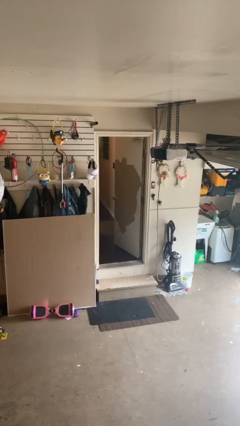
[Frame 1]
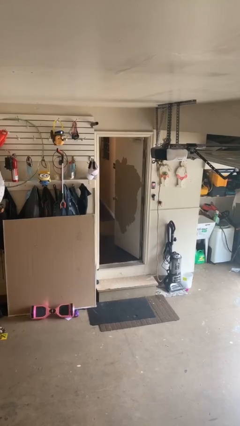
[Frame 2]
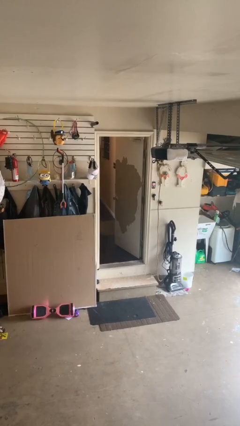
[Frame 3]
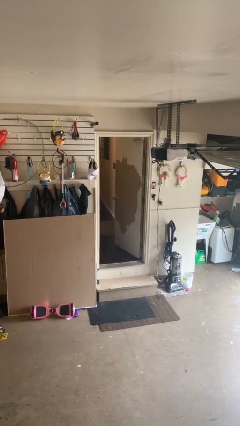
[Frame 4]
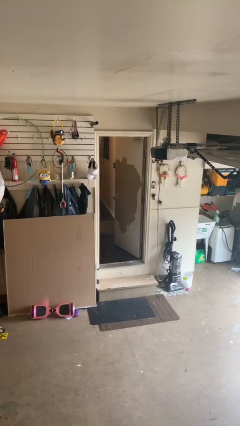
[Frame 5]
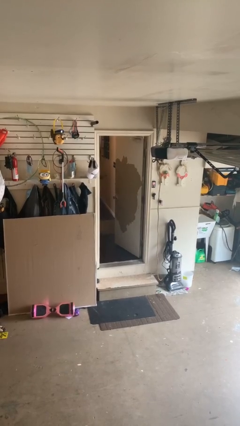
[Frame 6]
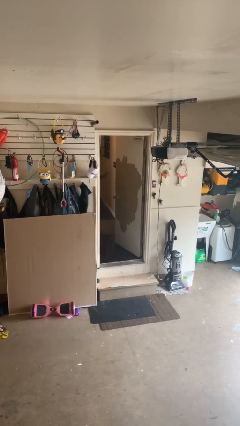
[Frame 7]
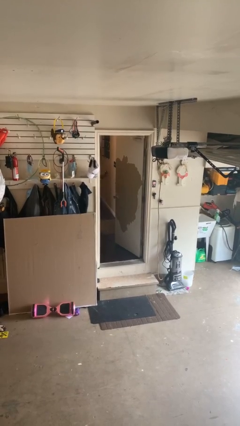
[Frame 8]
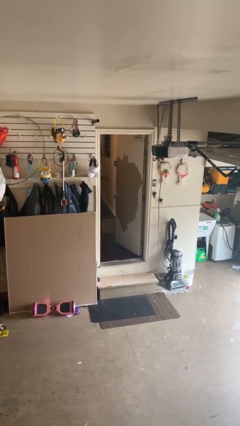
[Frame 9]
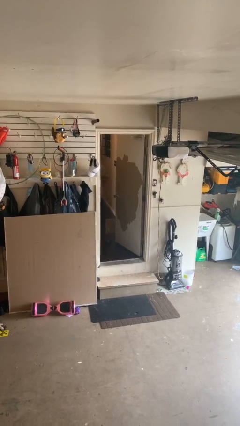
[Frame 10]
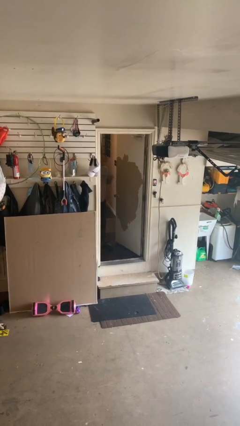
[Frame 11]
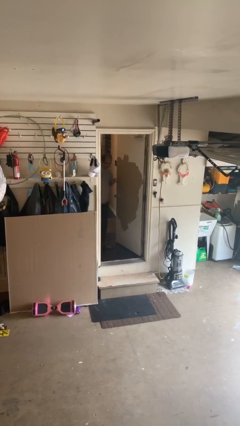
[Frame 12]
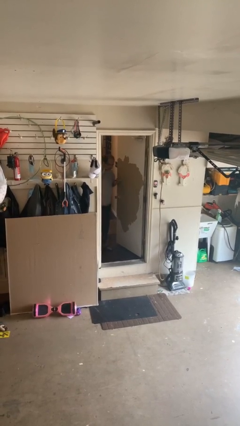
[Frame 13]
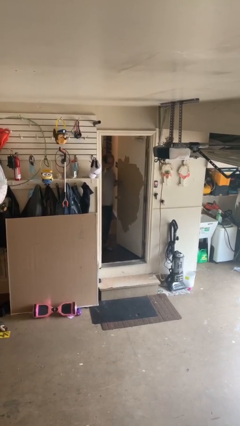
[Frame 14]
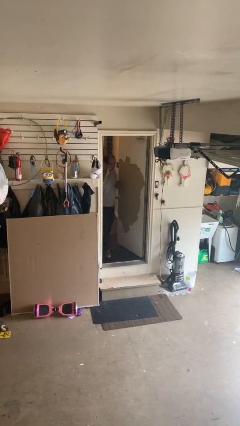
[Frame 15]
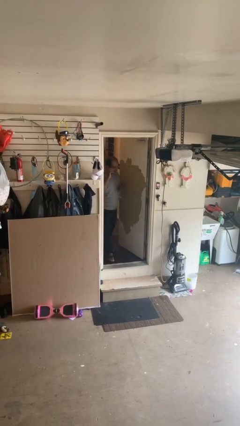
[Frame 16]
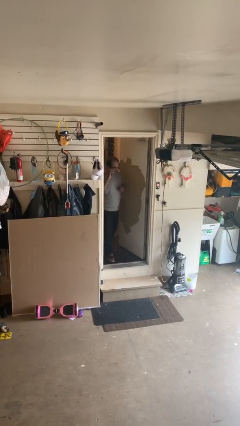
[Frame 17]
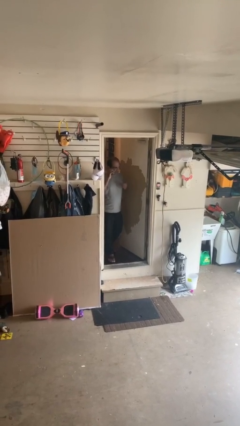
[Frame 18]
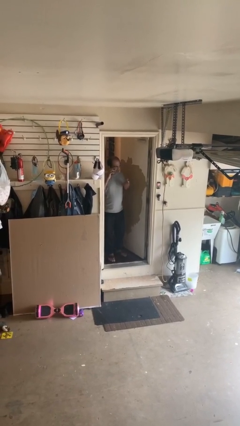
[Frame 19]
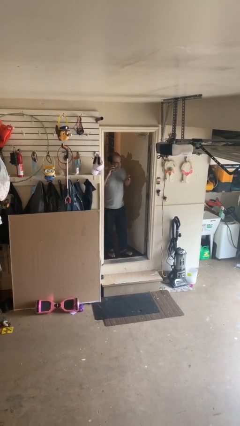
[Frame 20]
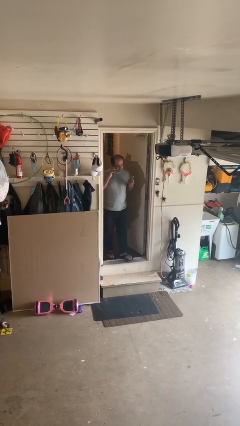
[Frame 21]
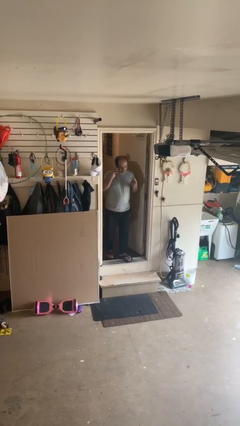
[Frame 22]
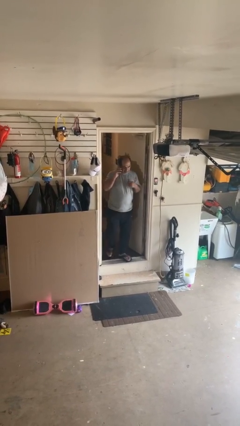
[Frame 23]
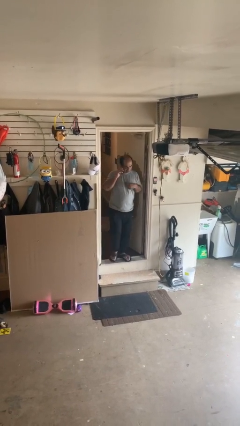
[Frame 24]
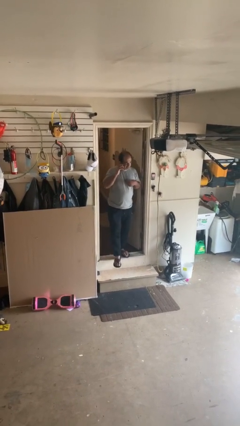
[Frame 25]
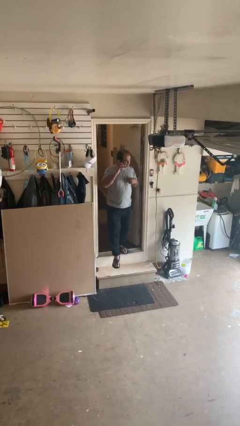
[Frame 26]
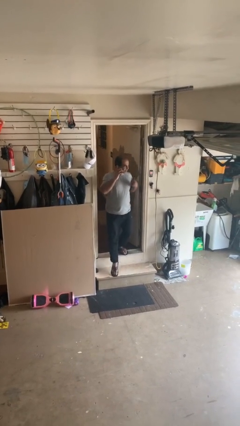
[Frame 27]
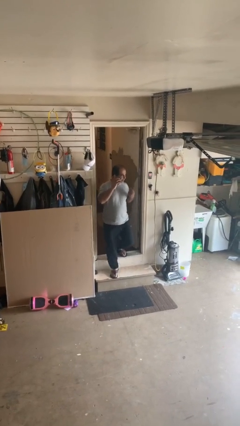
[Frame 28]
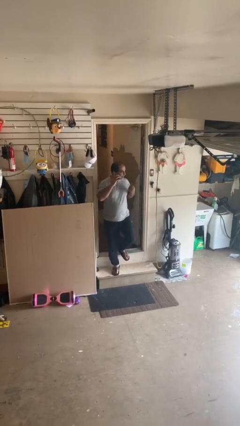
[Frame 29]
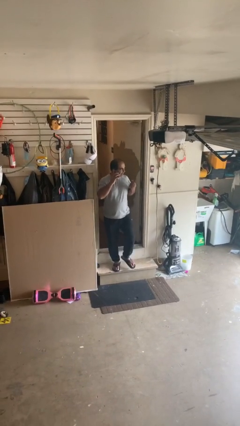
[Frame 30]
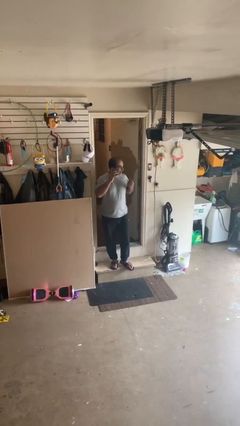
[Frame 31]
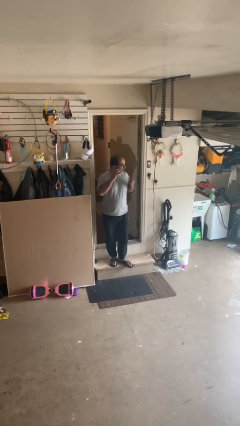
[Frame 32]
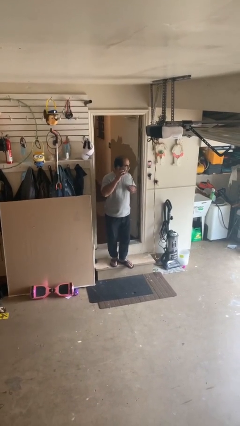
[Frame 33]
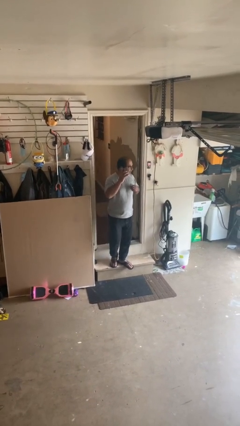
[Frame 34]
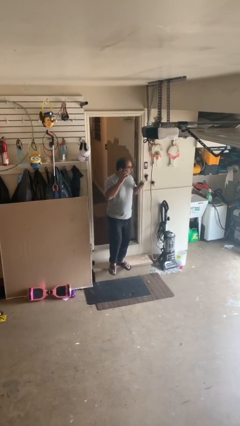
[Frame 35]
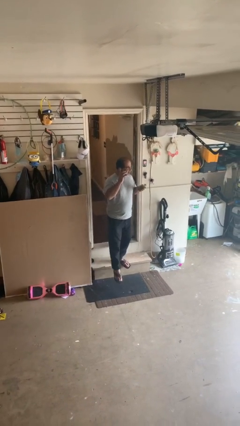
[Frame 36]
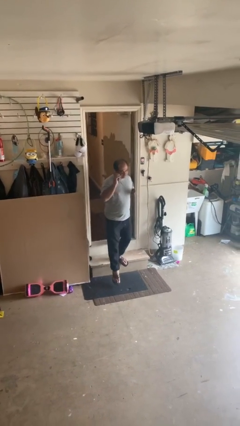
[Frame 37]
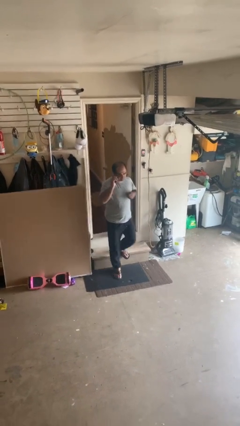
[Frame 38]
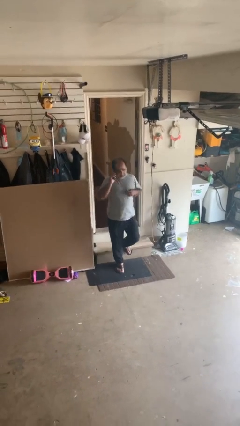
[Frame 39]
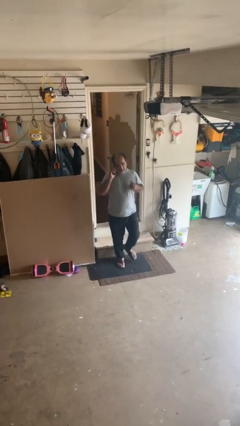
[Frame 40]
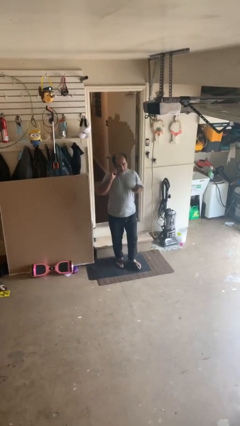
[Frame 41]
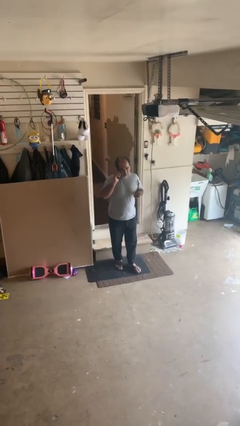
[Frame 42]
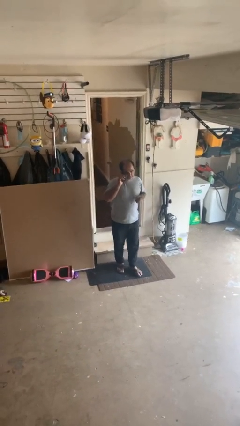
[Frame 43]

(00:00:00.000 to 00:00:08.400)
person enters scene through structure

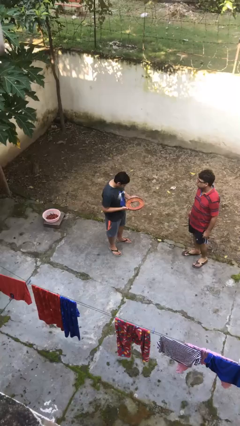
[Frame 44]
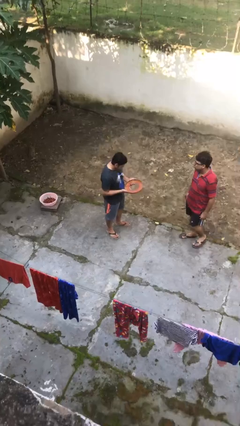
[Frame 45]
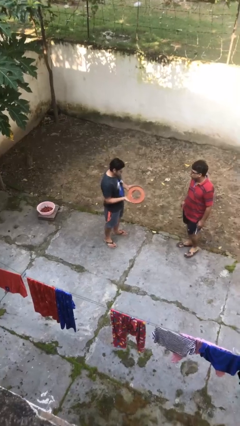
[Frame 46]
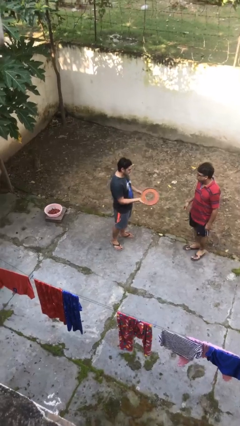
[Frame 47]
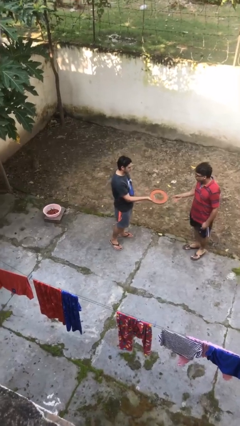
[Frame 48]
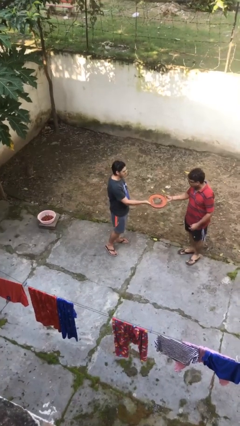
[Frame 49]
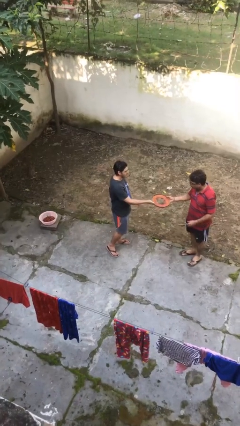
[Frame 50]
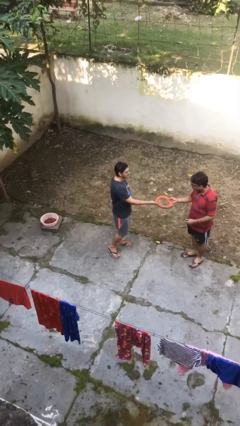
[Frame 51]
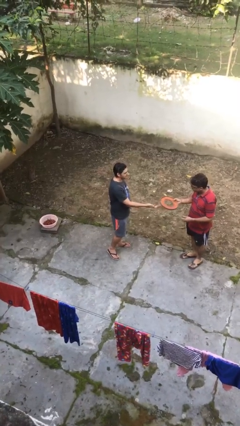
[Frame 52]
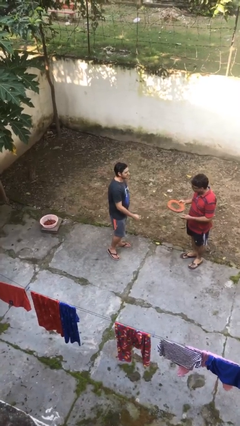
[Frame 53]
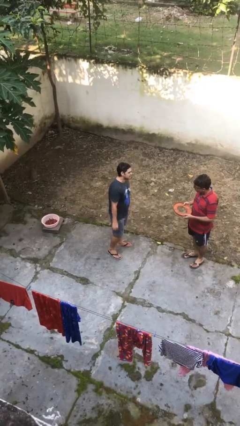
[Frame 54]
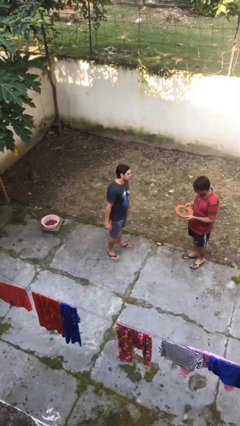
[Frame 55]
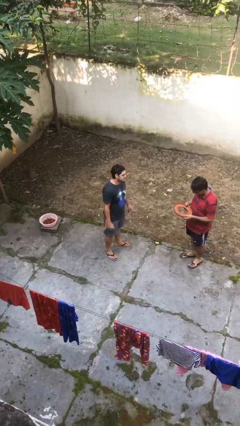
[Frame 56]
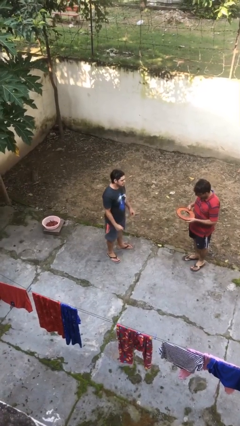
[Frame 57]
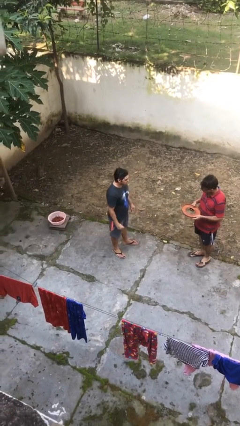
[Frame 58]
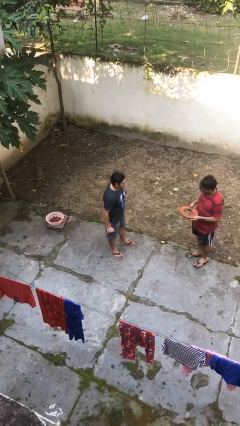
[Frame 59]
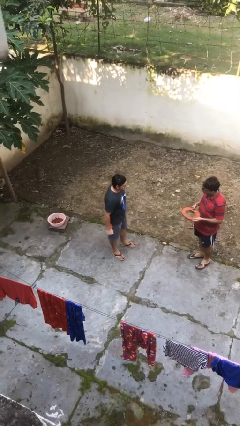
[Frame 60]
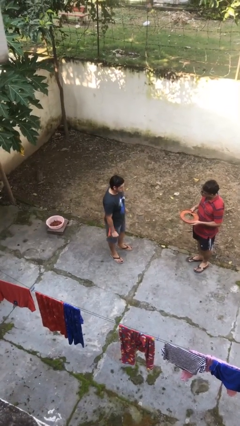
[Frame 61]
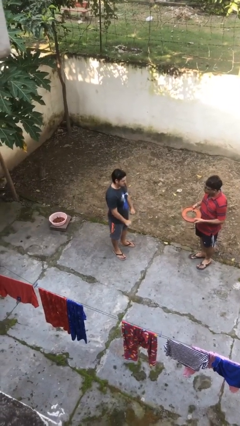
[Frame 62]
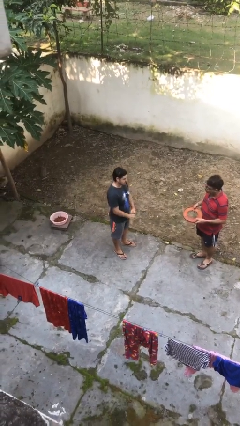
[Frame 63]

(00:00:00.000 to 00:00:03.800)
person transfers object to person

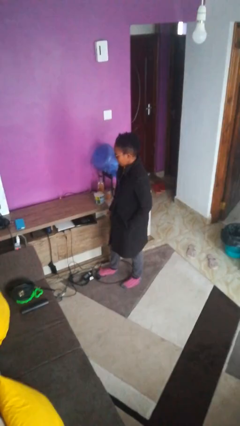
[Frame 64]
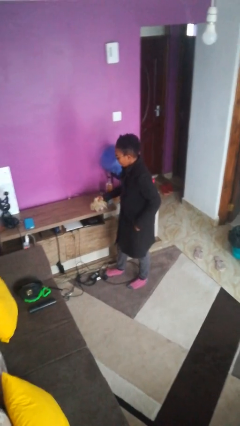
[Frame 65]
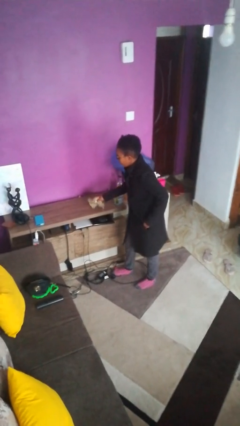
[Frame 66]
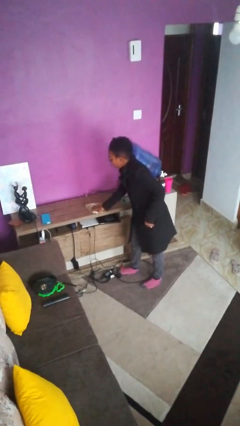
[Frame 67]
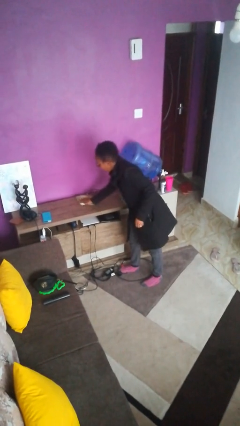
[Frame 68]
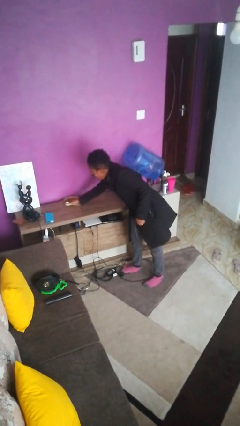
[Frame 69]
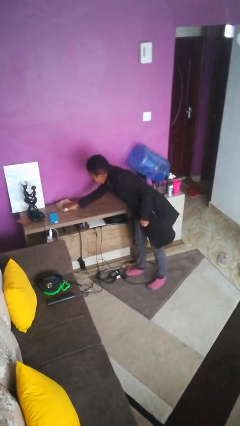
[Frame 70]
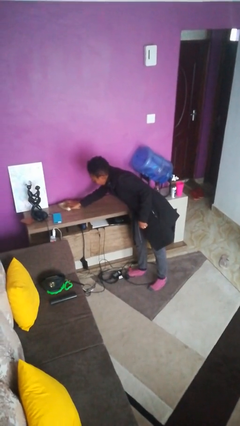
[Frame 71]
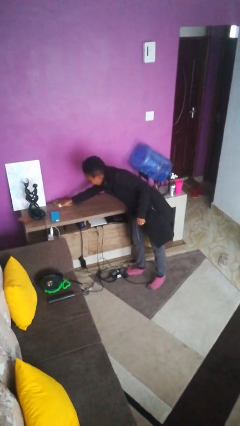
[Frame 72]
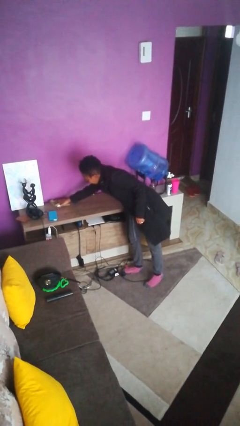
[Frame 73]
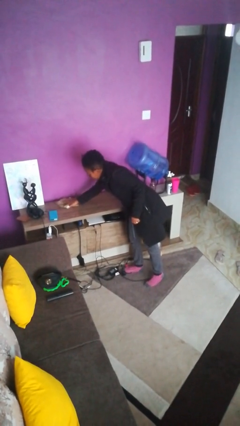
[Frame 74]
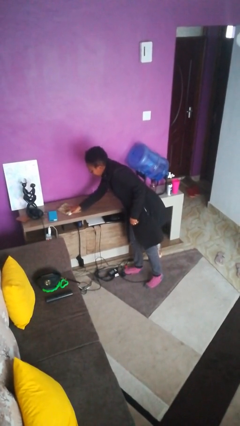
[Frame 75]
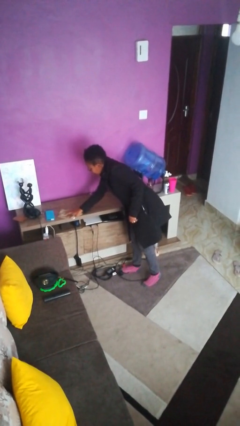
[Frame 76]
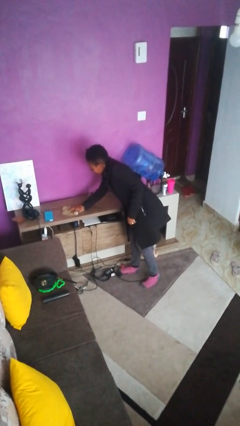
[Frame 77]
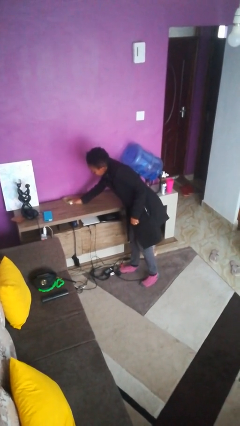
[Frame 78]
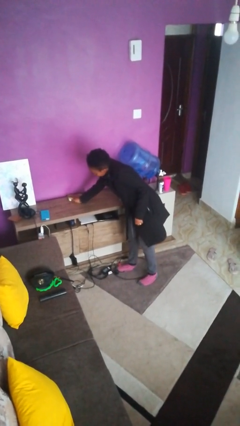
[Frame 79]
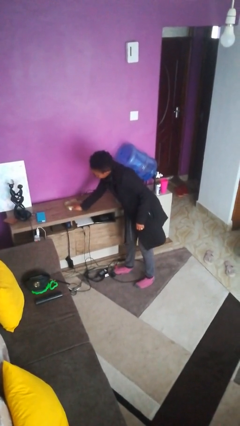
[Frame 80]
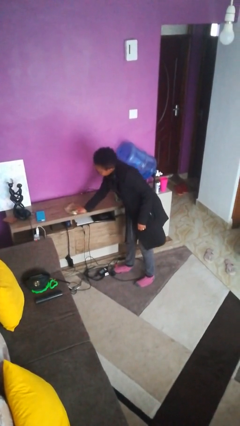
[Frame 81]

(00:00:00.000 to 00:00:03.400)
person cleans table with rag

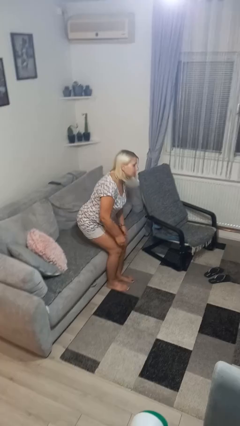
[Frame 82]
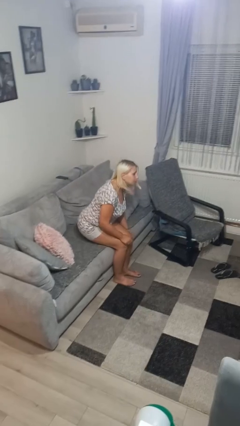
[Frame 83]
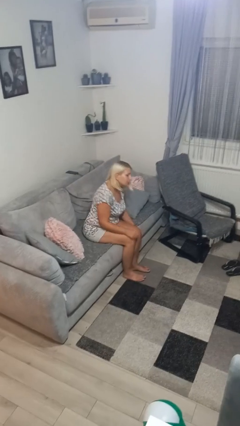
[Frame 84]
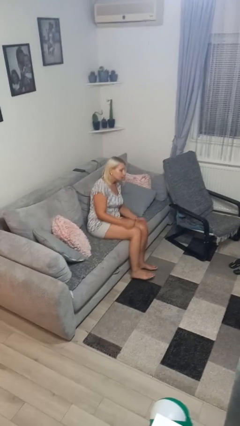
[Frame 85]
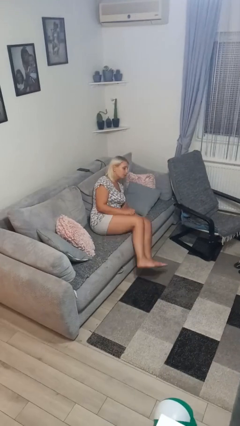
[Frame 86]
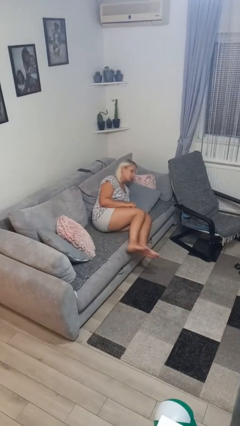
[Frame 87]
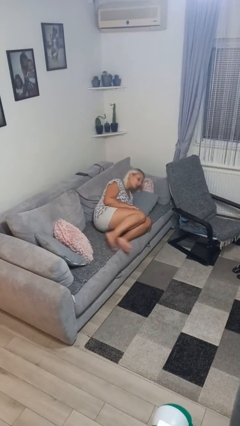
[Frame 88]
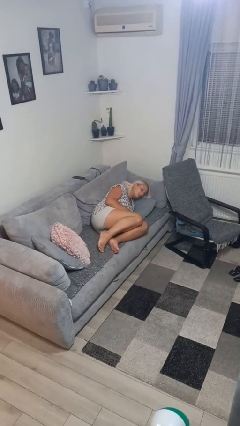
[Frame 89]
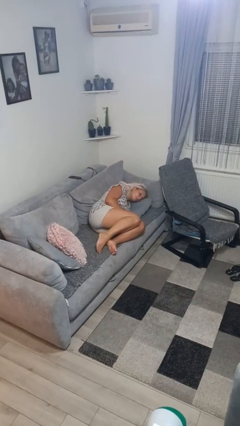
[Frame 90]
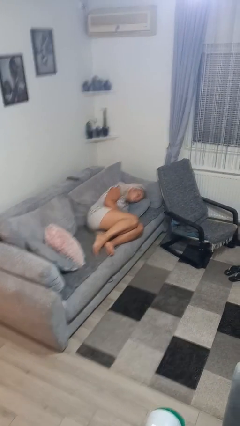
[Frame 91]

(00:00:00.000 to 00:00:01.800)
person lies down on couch

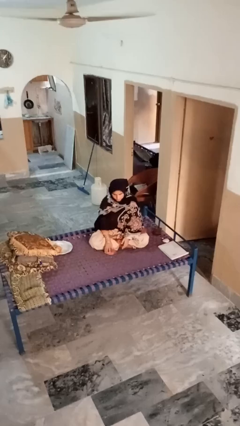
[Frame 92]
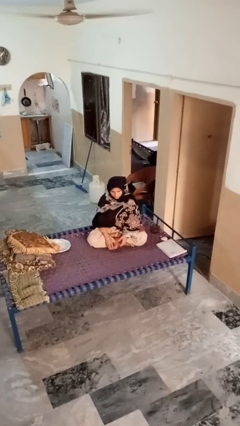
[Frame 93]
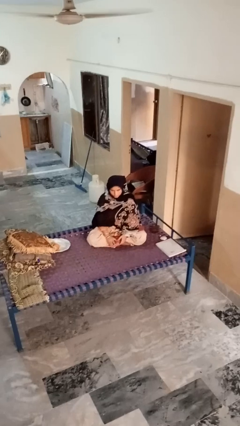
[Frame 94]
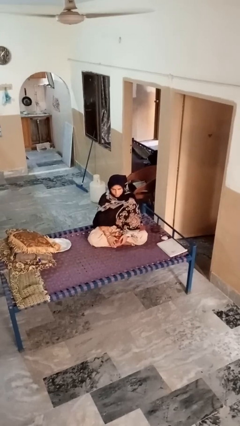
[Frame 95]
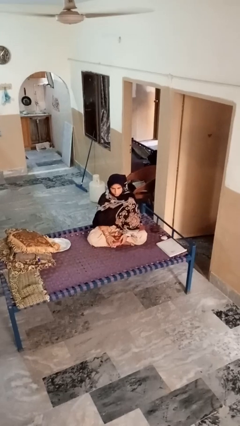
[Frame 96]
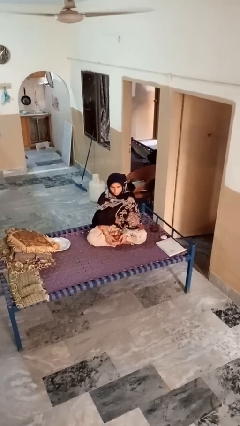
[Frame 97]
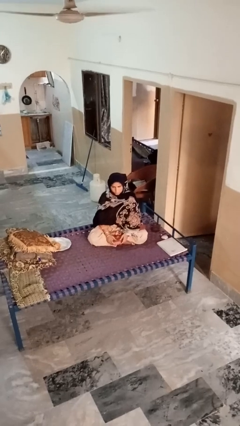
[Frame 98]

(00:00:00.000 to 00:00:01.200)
person picks up object from floor
